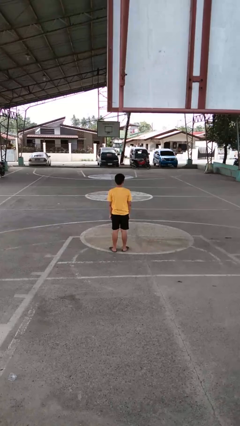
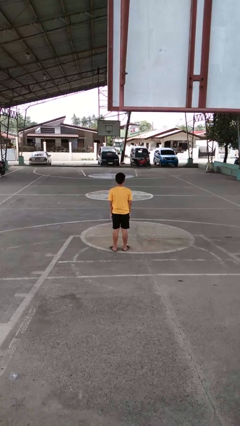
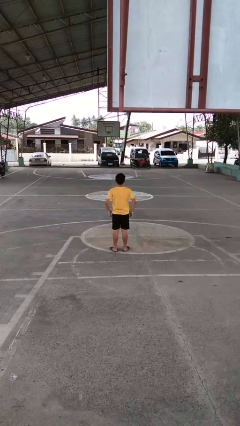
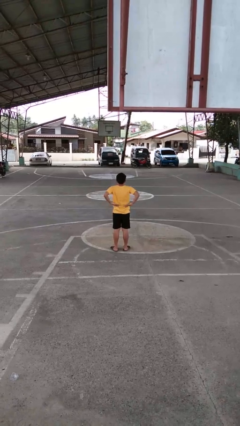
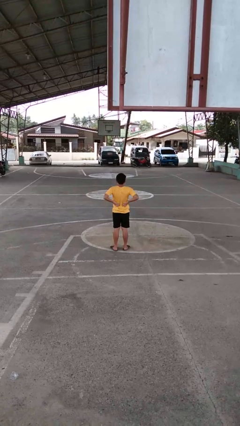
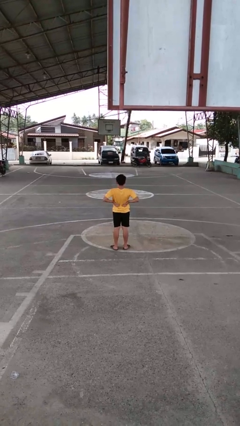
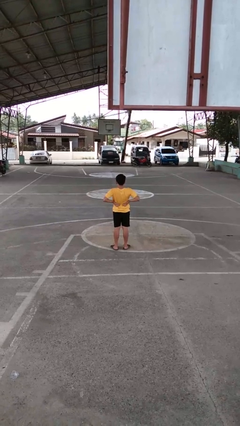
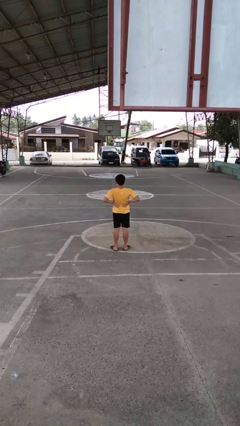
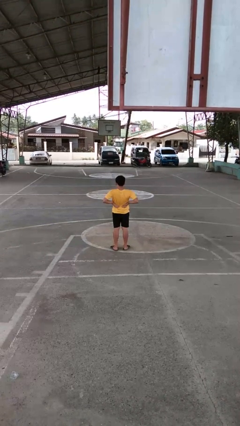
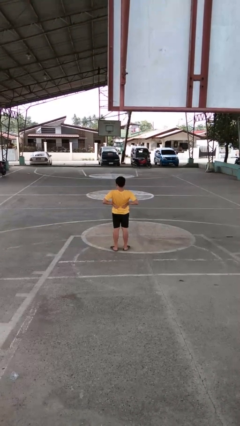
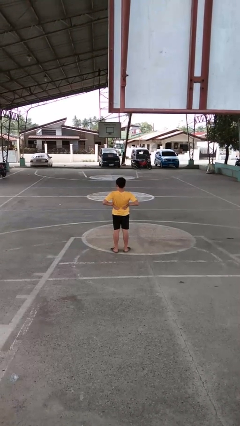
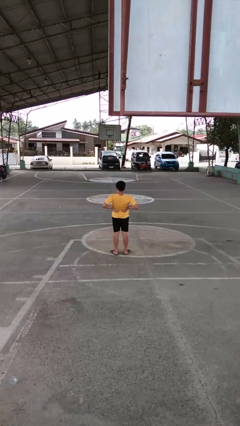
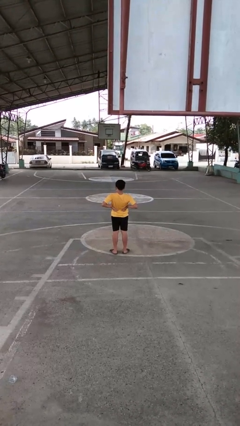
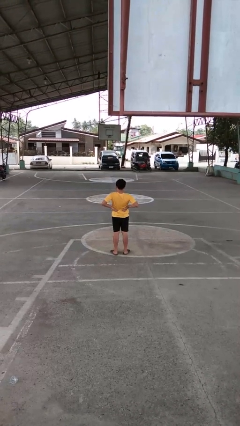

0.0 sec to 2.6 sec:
person stretches back

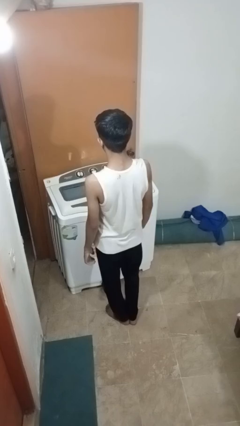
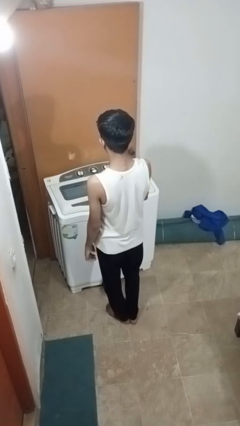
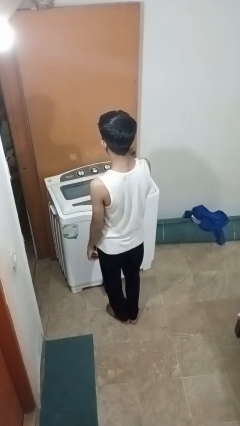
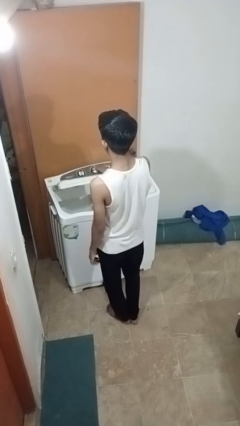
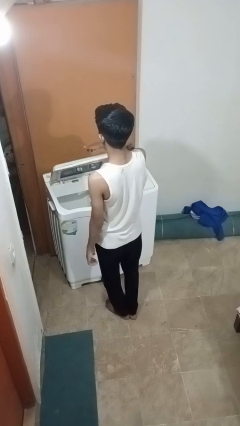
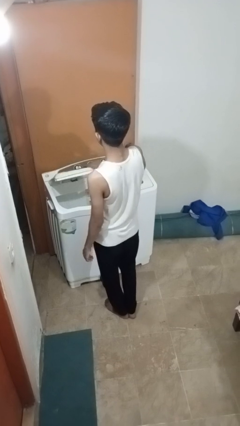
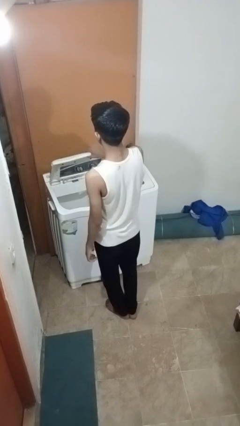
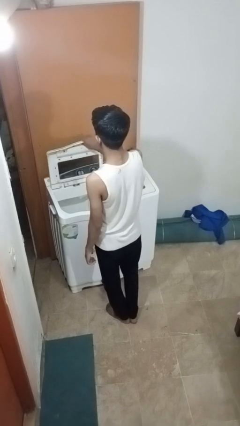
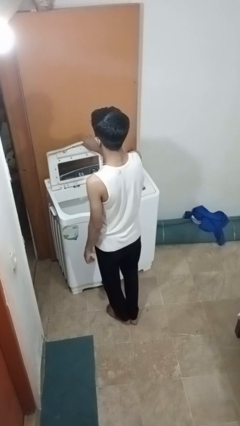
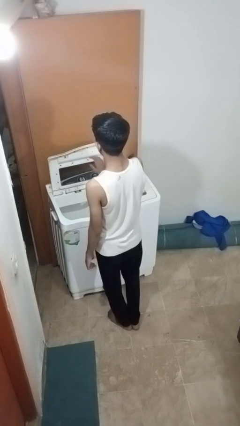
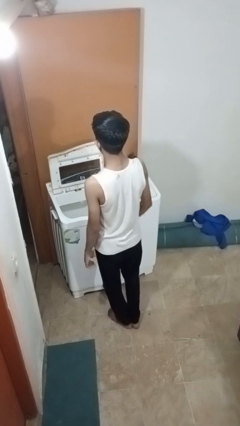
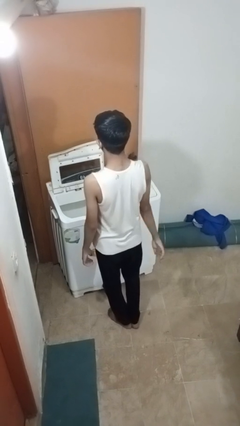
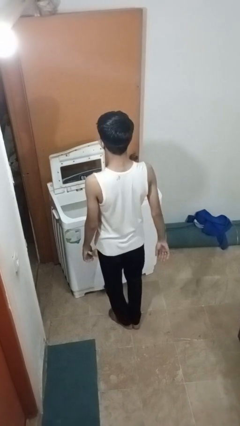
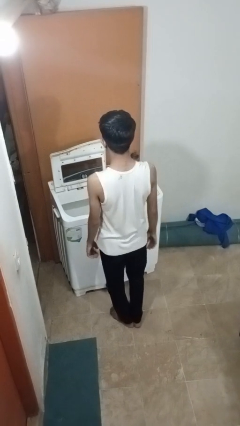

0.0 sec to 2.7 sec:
person opens clothes washer

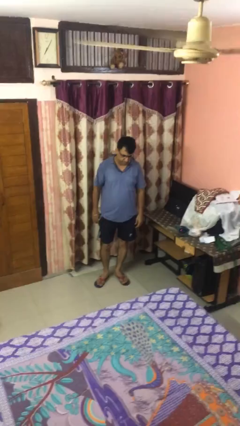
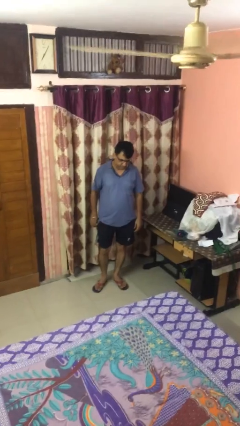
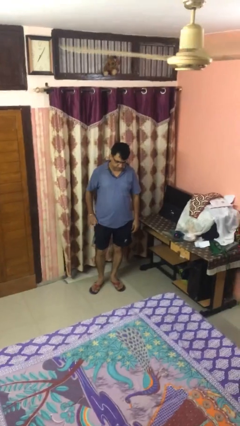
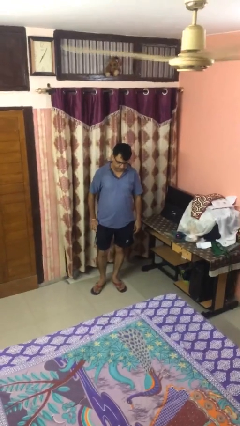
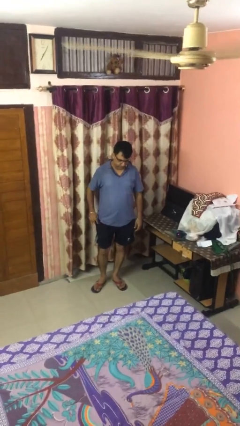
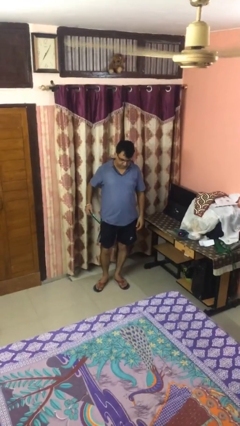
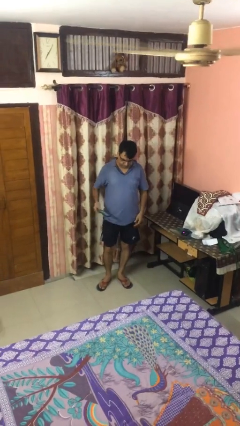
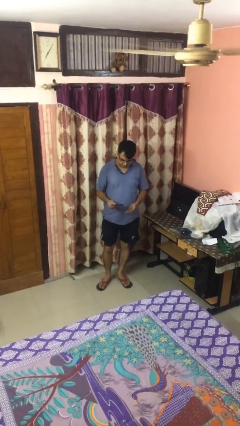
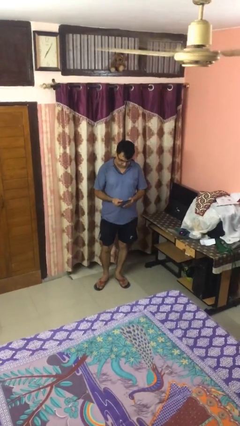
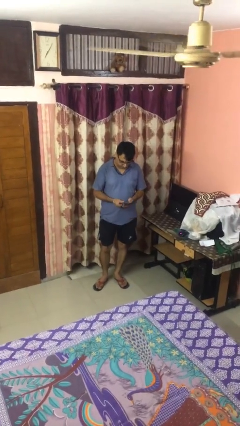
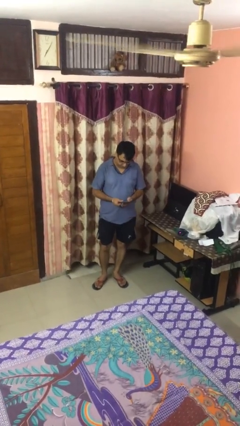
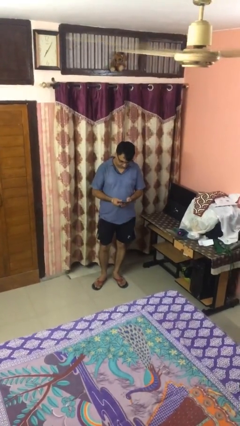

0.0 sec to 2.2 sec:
person takes phone from pocket

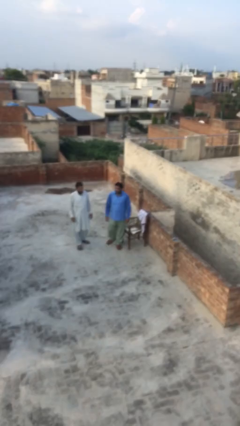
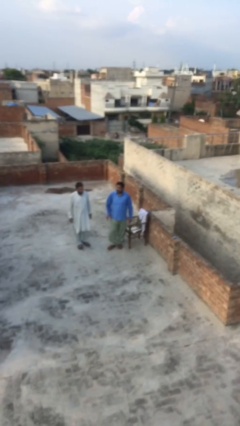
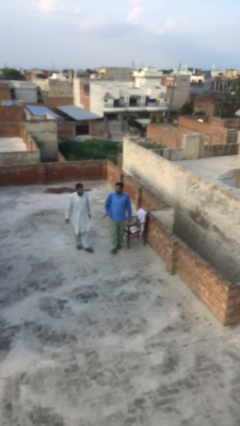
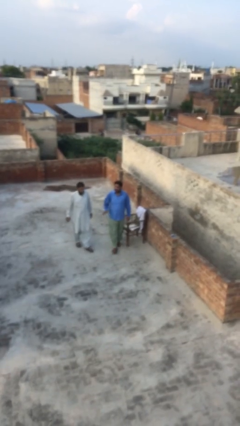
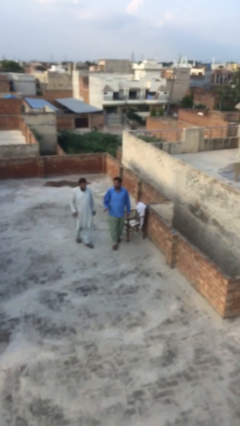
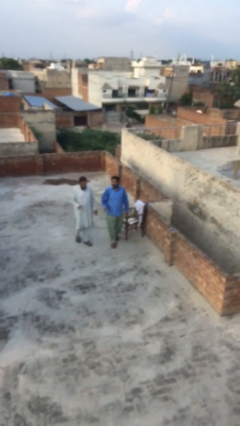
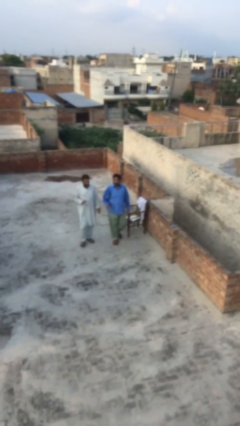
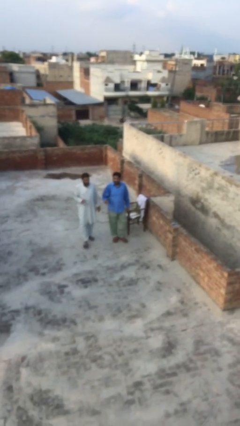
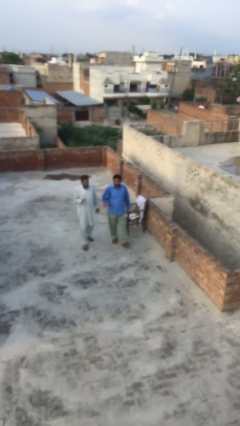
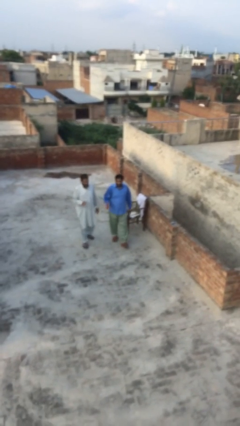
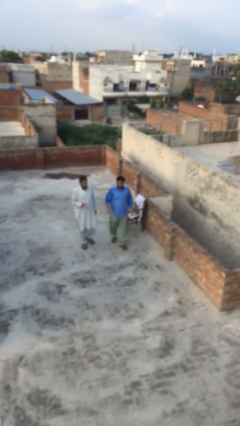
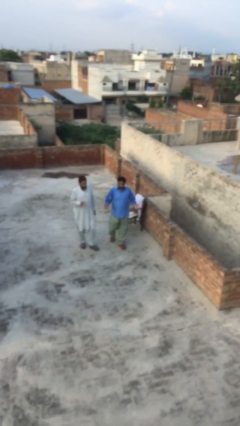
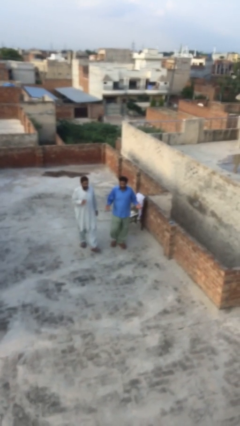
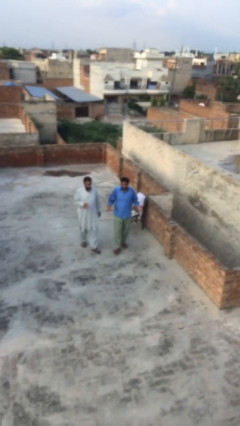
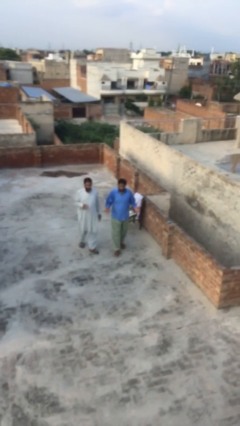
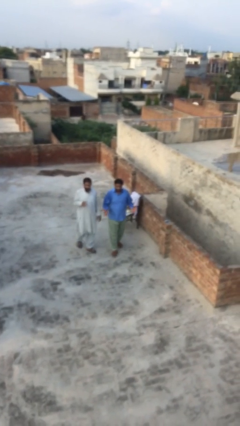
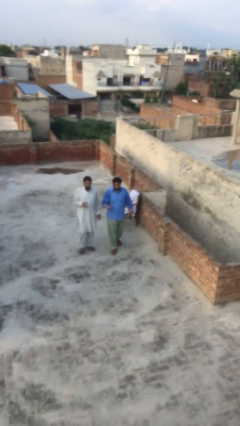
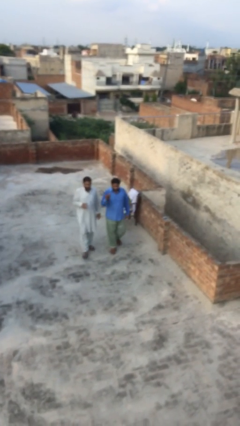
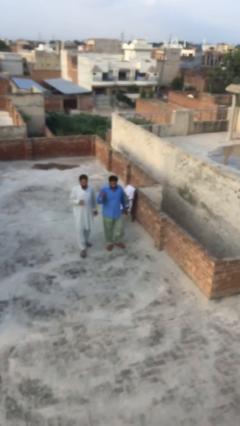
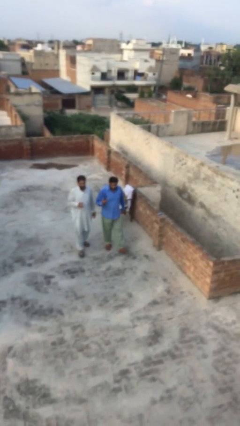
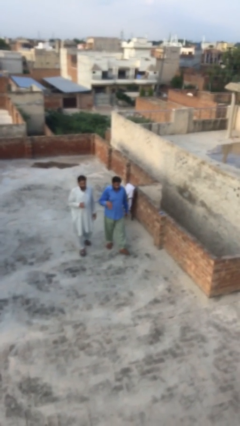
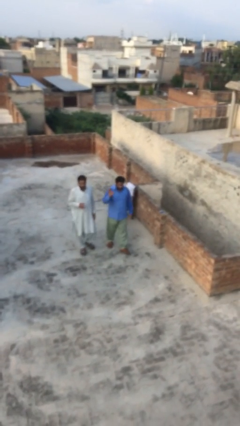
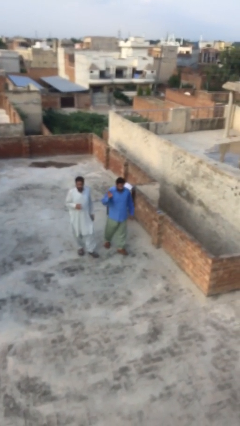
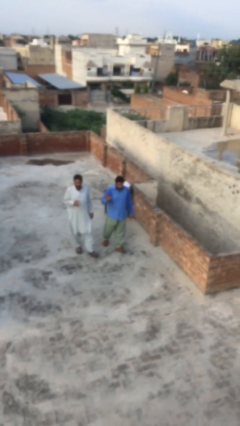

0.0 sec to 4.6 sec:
person talks to person

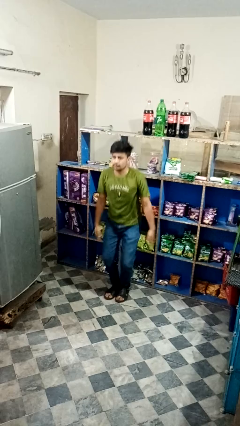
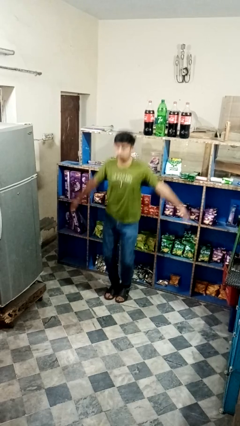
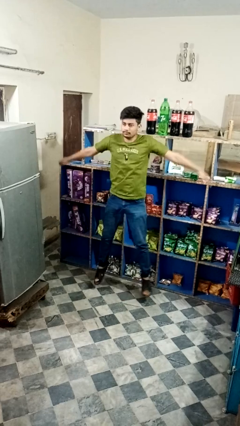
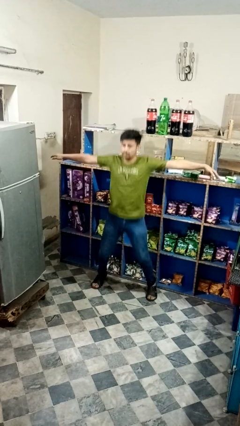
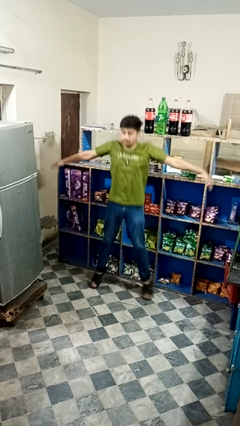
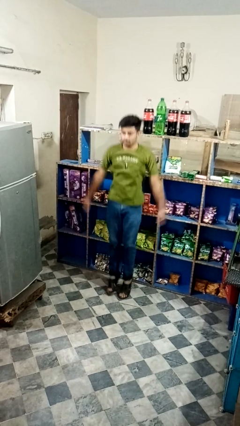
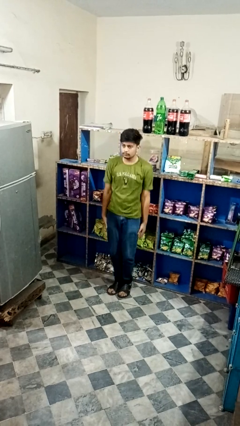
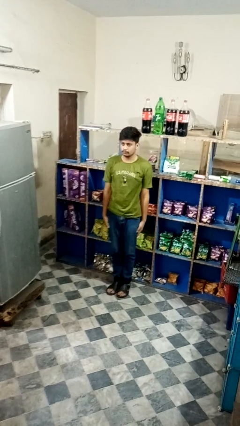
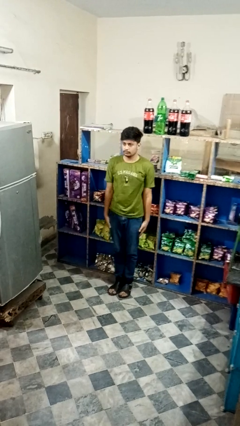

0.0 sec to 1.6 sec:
person exercises with jumping jacks

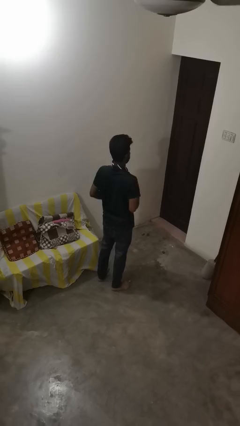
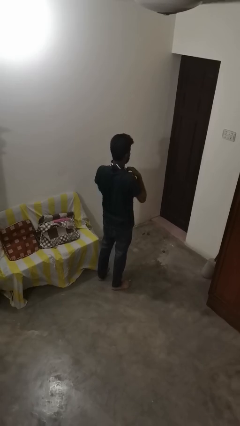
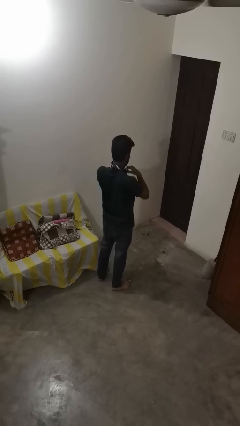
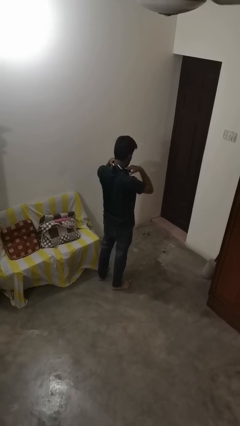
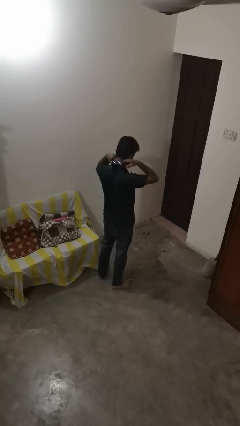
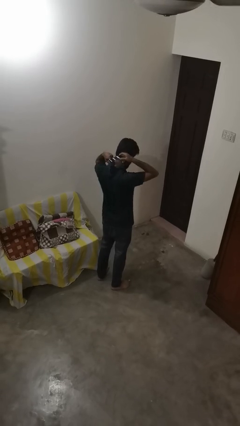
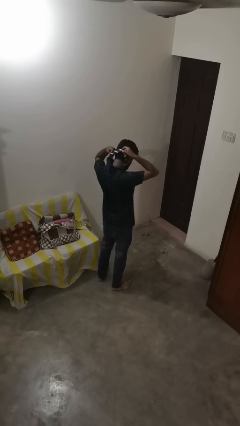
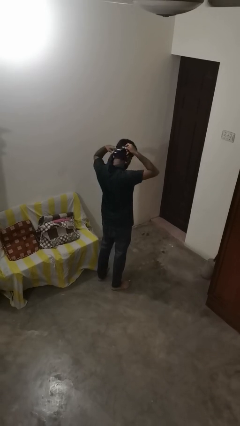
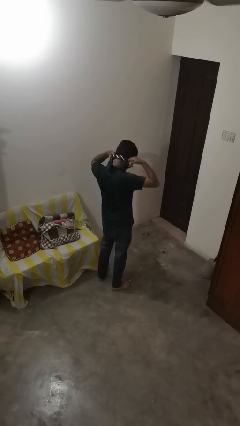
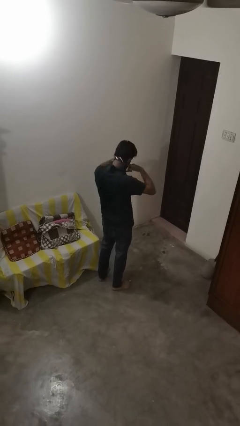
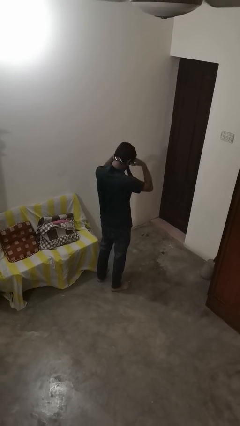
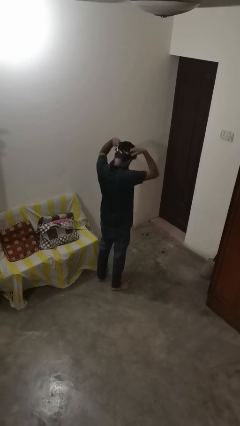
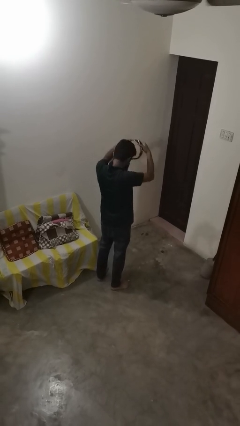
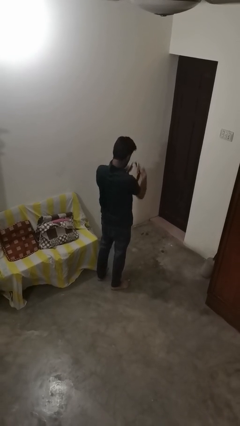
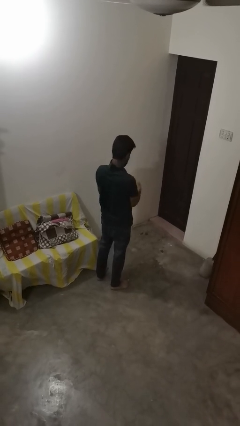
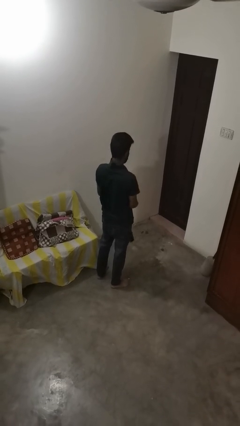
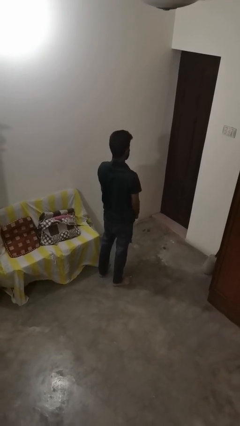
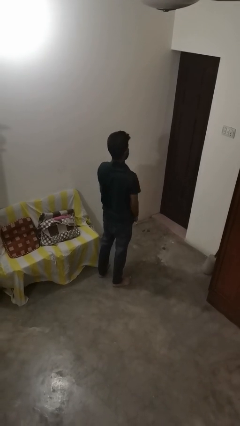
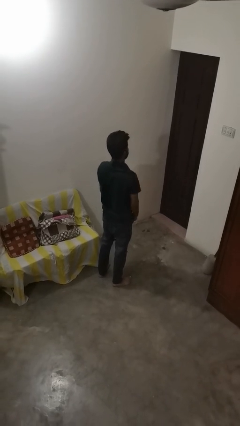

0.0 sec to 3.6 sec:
person takes off necktie
